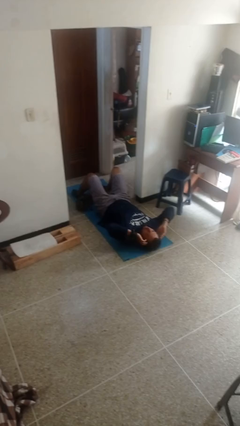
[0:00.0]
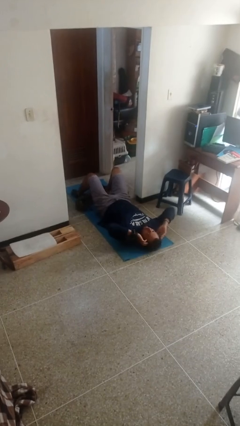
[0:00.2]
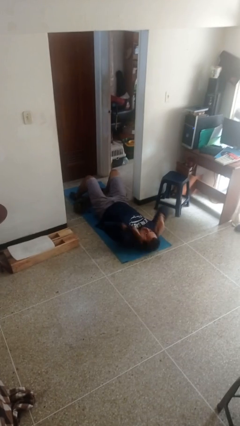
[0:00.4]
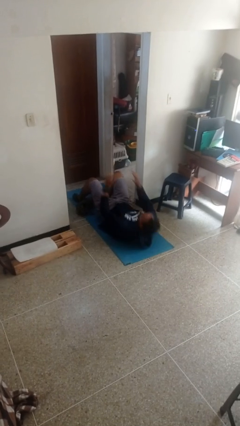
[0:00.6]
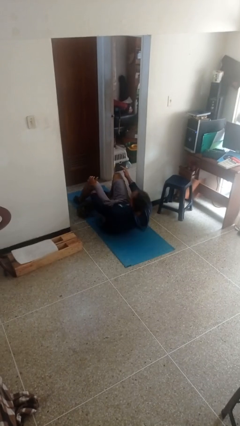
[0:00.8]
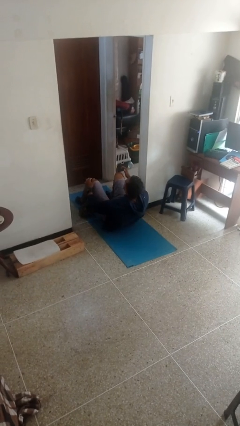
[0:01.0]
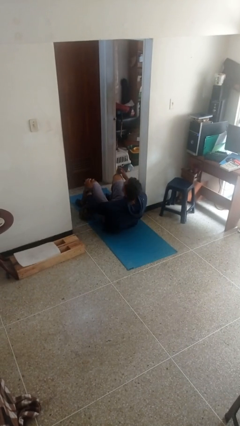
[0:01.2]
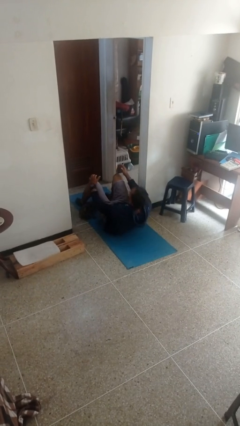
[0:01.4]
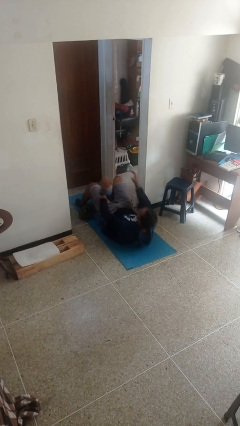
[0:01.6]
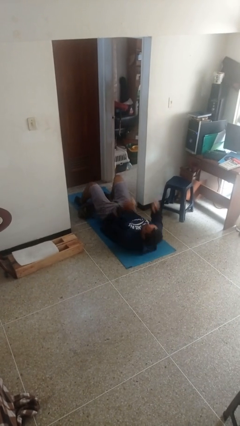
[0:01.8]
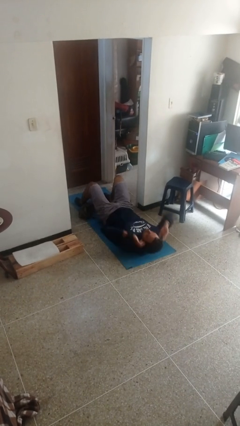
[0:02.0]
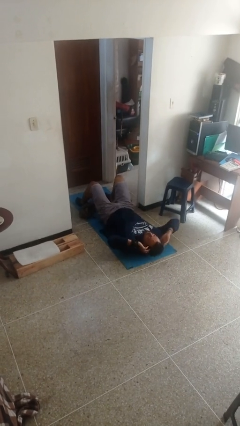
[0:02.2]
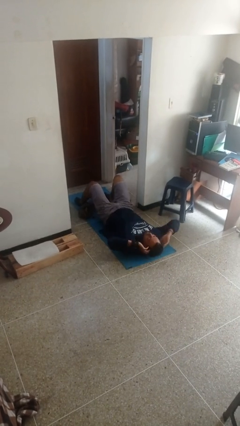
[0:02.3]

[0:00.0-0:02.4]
person exercises with situp

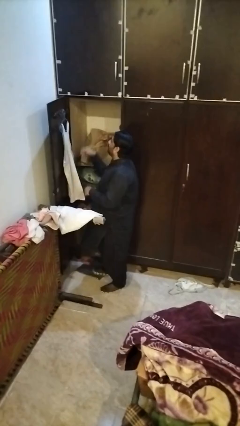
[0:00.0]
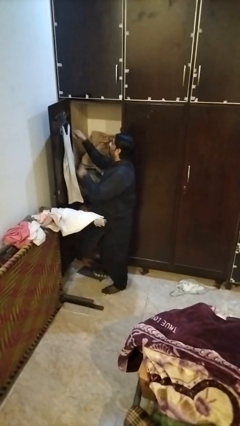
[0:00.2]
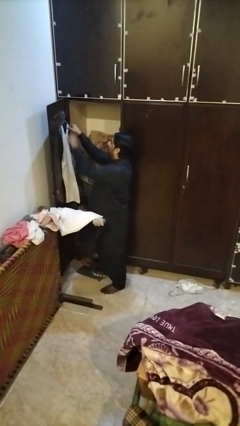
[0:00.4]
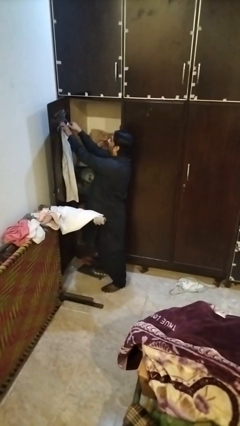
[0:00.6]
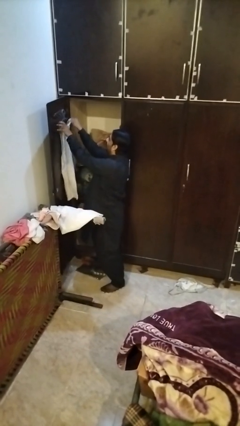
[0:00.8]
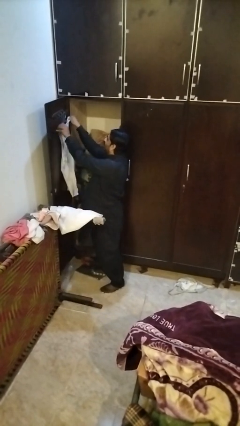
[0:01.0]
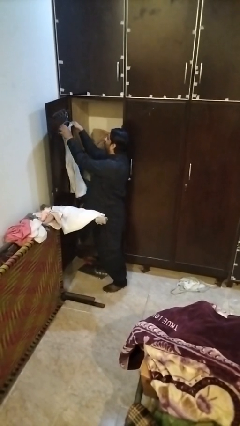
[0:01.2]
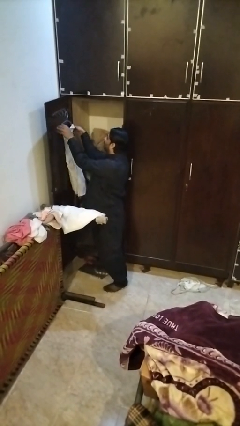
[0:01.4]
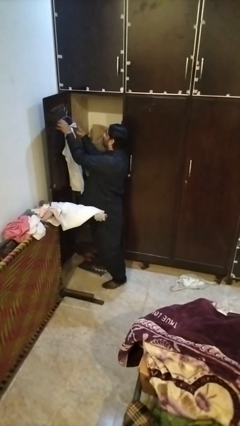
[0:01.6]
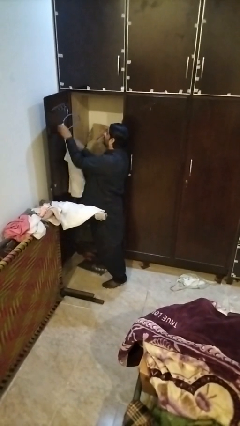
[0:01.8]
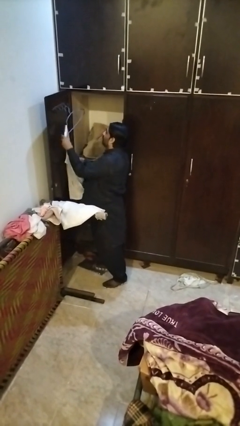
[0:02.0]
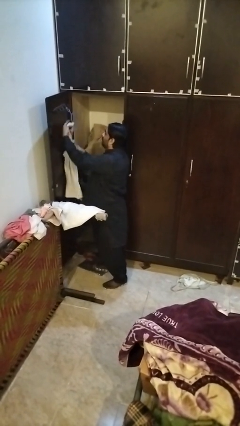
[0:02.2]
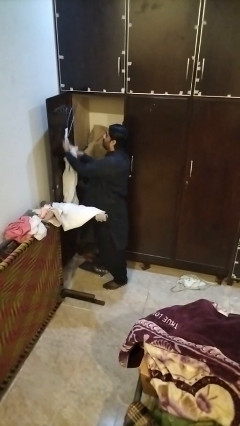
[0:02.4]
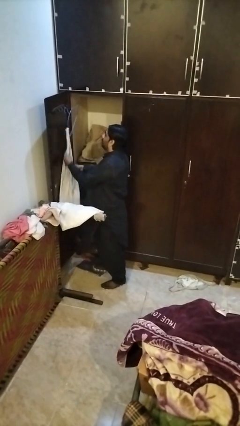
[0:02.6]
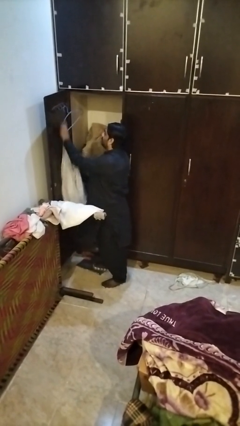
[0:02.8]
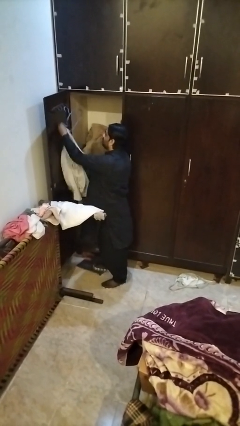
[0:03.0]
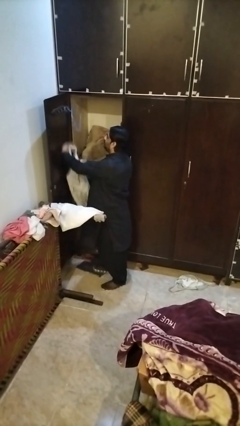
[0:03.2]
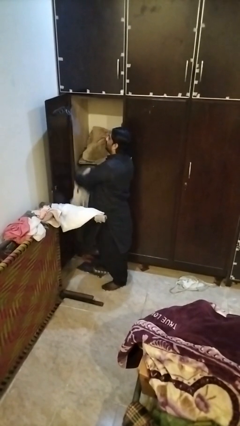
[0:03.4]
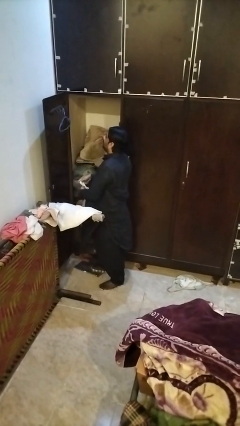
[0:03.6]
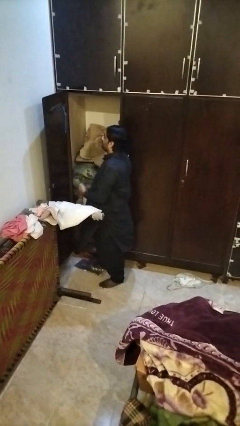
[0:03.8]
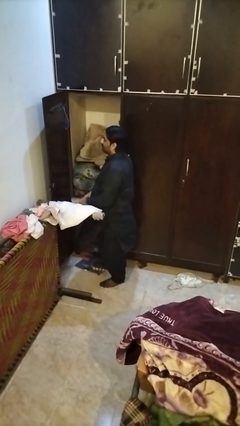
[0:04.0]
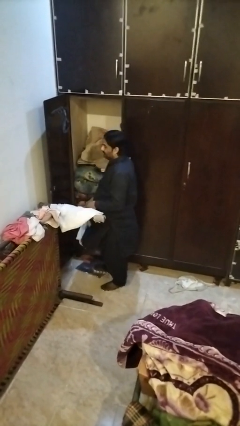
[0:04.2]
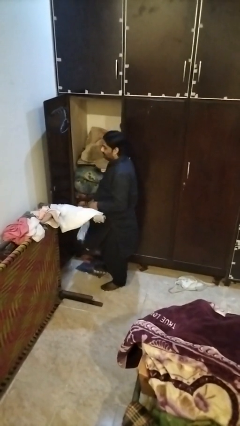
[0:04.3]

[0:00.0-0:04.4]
person takes clothes from closet

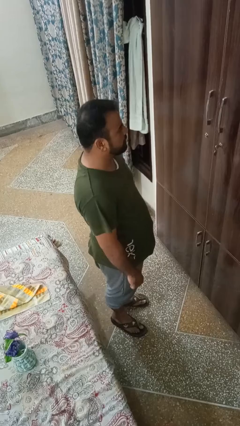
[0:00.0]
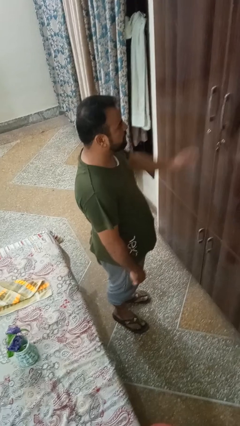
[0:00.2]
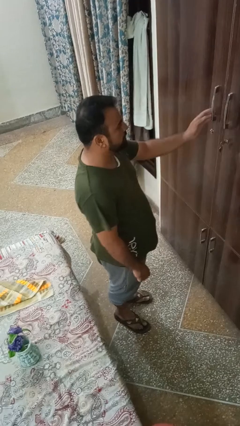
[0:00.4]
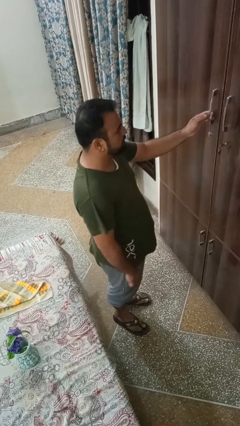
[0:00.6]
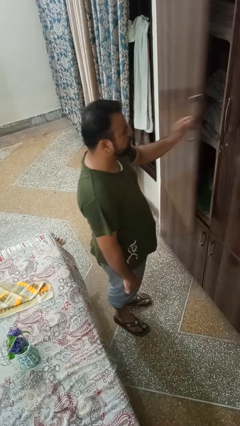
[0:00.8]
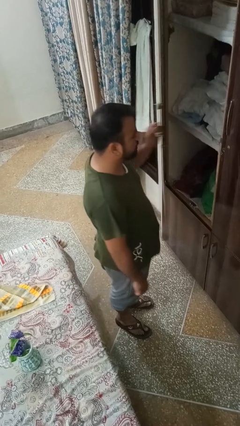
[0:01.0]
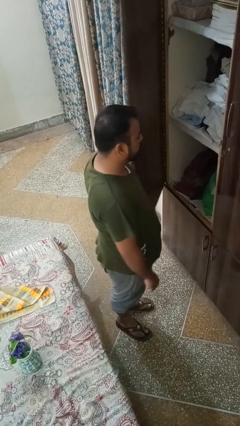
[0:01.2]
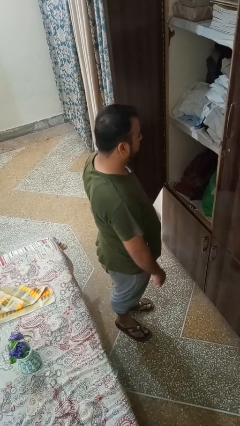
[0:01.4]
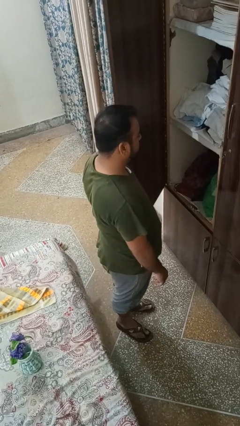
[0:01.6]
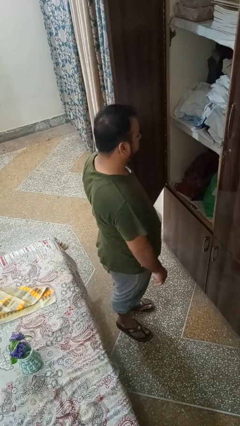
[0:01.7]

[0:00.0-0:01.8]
person opens closet door

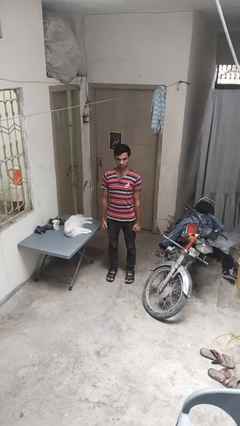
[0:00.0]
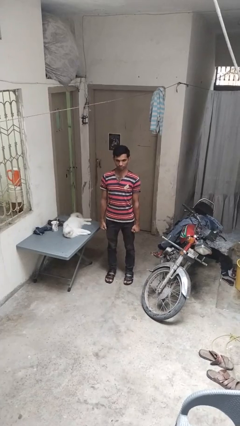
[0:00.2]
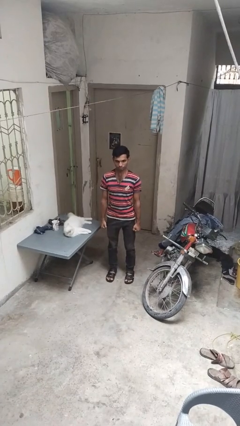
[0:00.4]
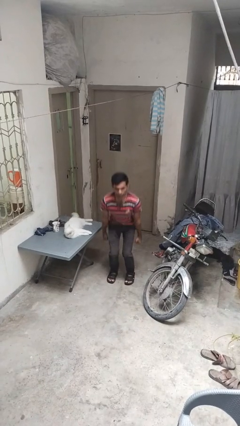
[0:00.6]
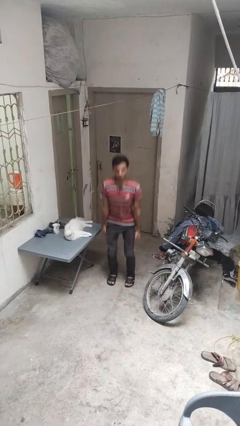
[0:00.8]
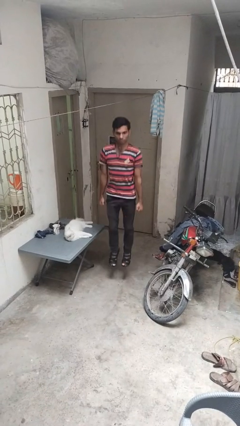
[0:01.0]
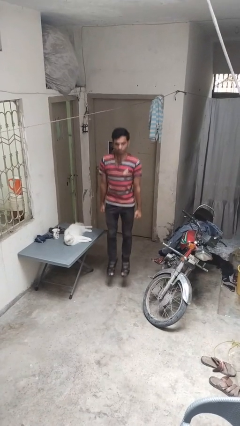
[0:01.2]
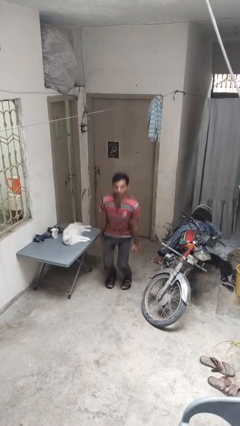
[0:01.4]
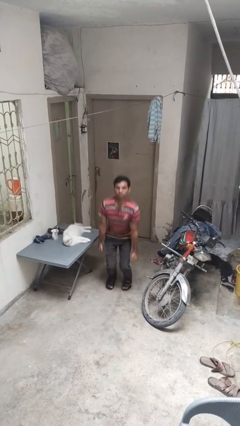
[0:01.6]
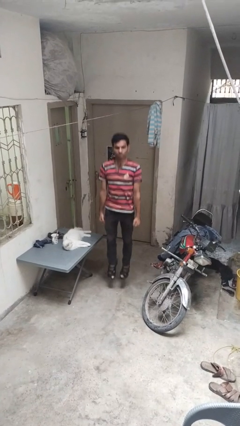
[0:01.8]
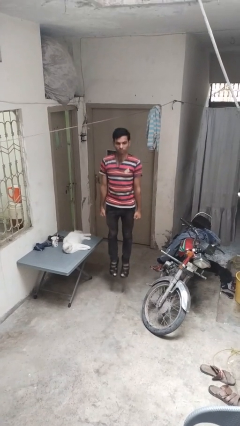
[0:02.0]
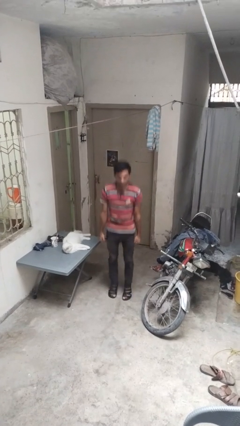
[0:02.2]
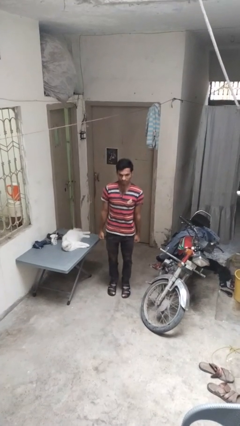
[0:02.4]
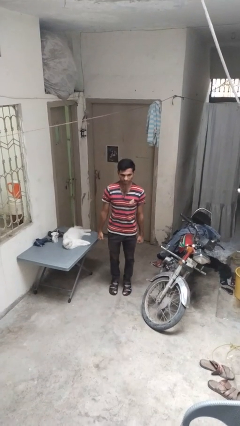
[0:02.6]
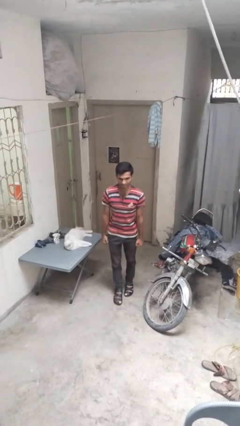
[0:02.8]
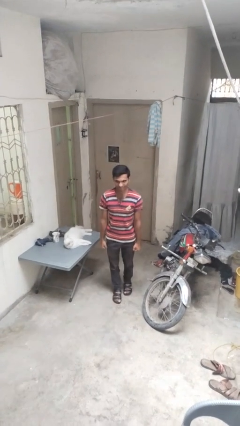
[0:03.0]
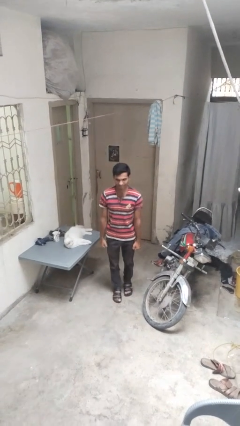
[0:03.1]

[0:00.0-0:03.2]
person jumps

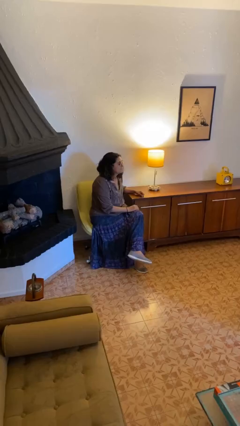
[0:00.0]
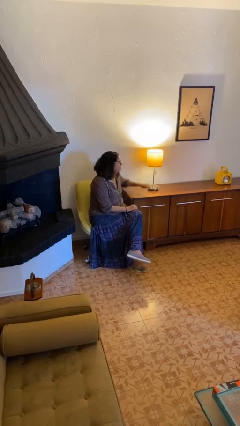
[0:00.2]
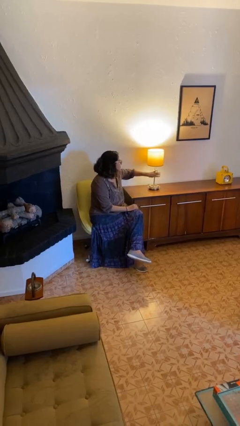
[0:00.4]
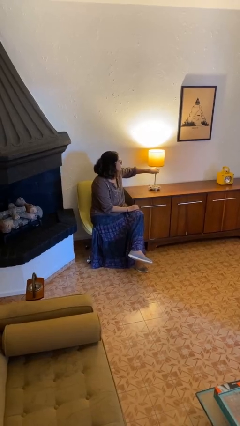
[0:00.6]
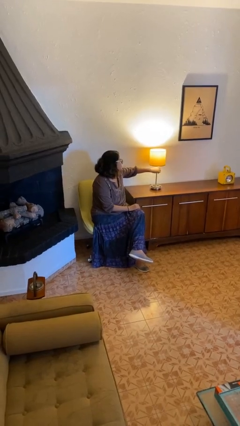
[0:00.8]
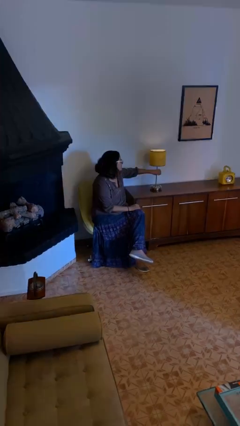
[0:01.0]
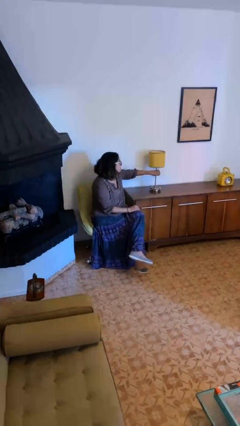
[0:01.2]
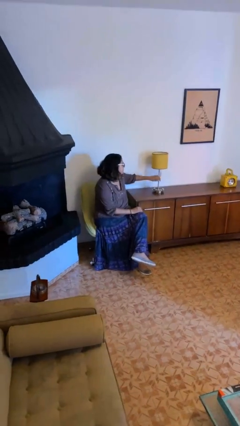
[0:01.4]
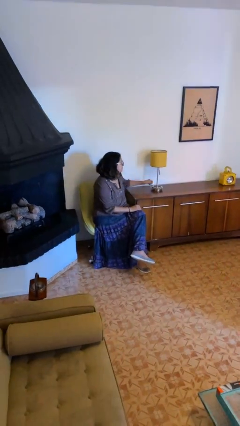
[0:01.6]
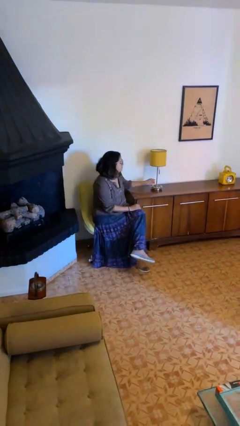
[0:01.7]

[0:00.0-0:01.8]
person turns off lamp

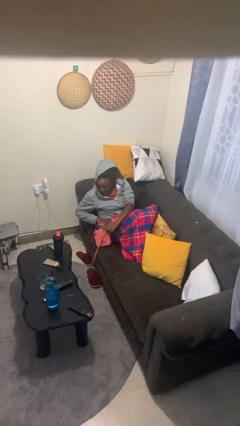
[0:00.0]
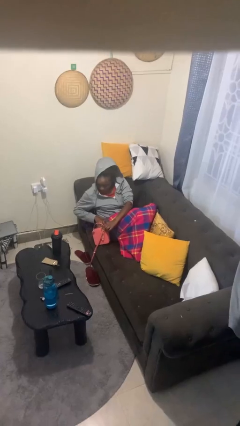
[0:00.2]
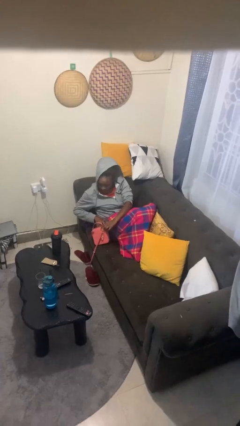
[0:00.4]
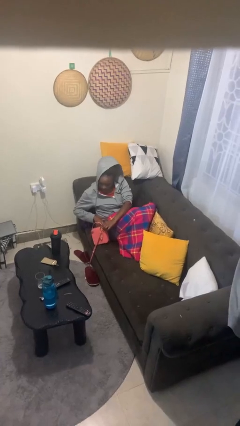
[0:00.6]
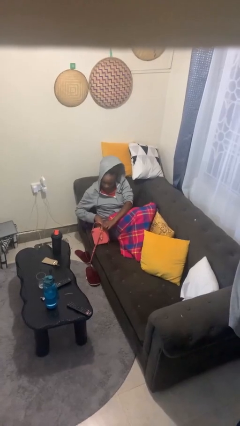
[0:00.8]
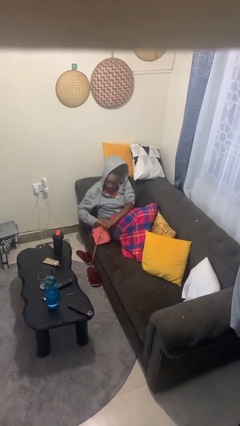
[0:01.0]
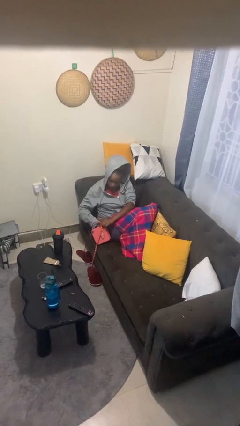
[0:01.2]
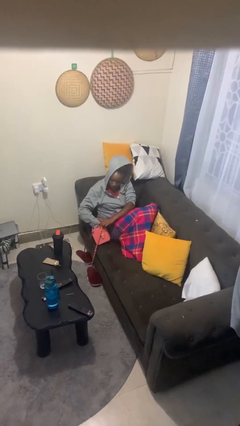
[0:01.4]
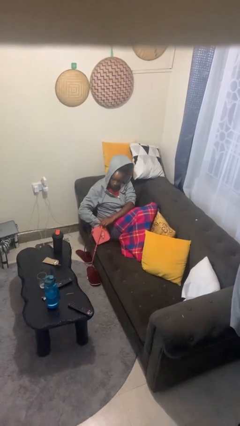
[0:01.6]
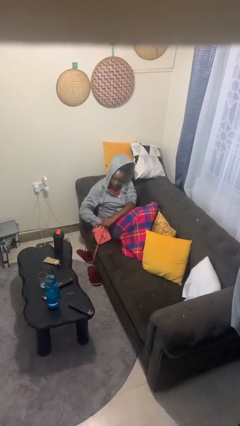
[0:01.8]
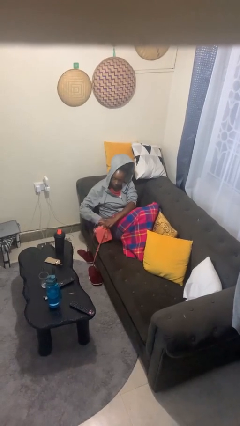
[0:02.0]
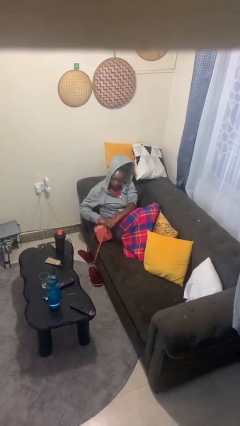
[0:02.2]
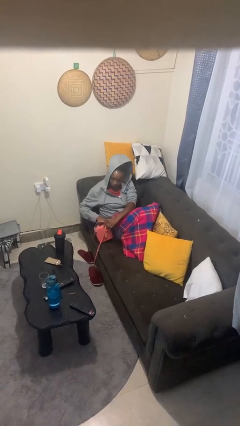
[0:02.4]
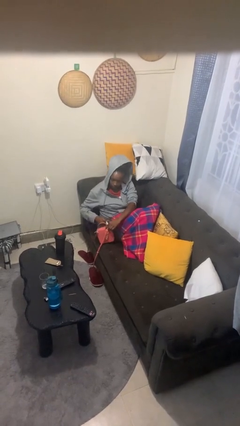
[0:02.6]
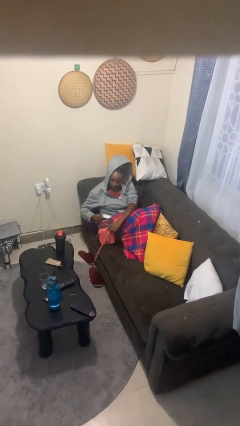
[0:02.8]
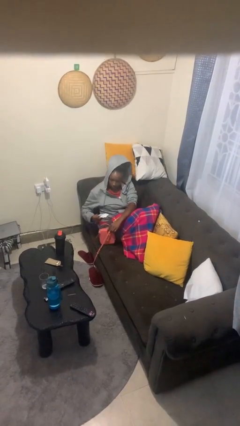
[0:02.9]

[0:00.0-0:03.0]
person takes object from purse

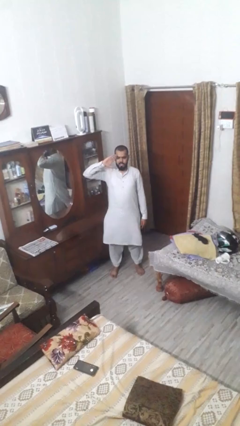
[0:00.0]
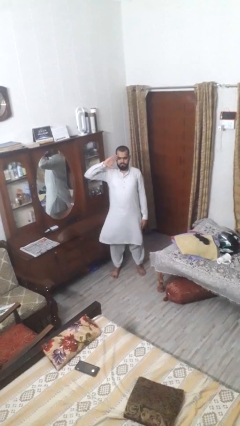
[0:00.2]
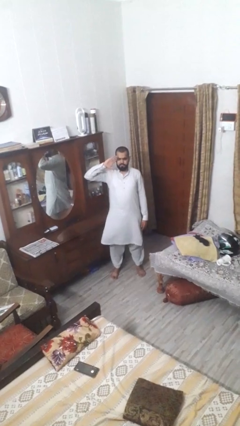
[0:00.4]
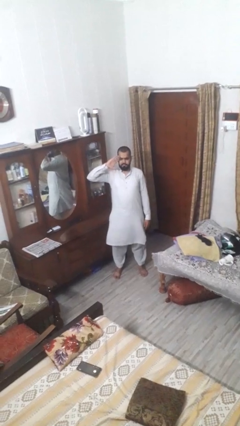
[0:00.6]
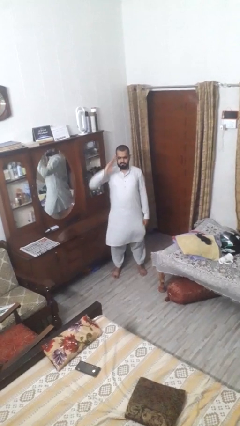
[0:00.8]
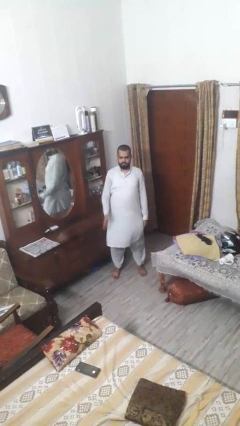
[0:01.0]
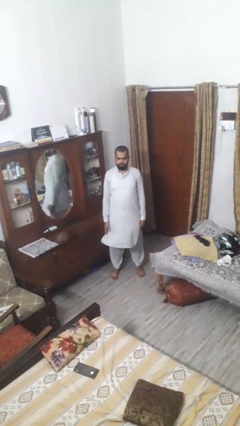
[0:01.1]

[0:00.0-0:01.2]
person salutes
